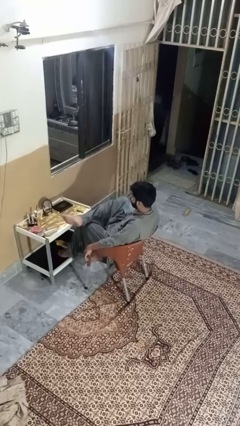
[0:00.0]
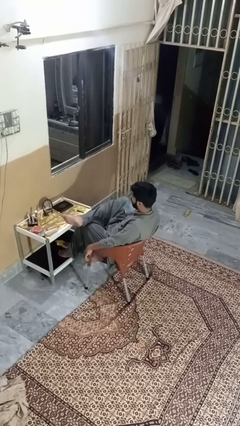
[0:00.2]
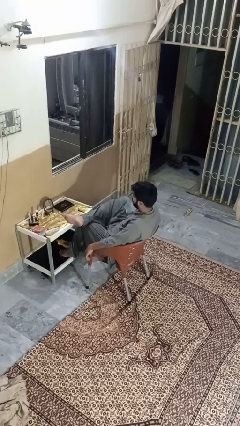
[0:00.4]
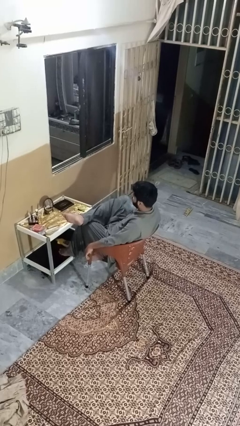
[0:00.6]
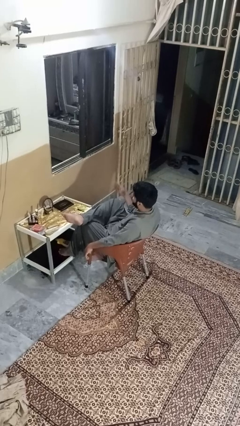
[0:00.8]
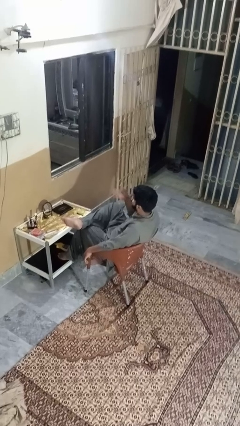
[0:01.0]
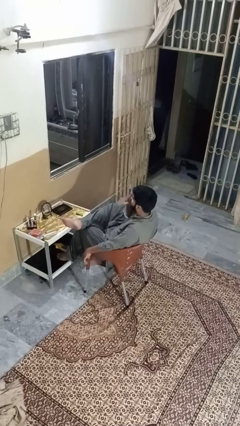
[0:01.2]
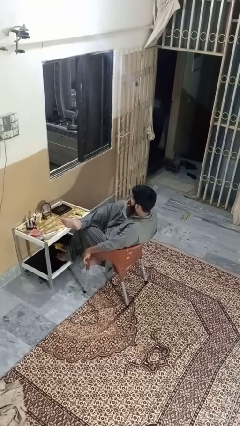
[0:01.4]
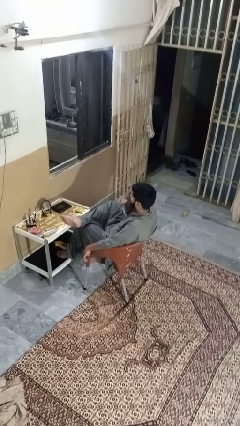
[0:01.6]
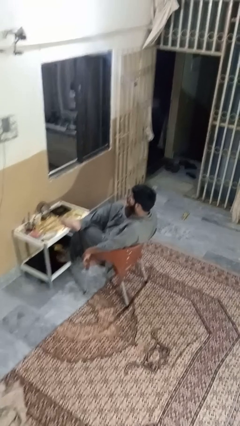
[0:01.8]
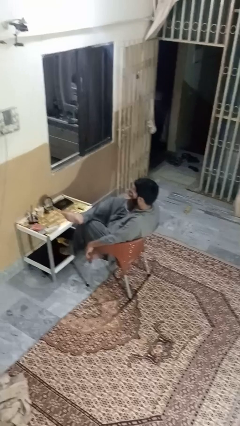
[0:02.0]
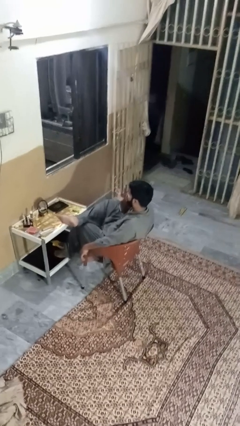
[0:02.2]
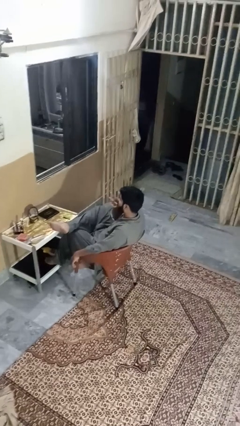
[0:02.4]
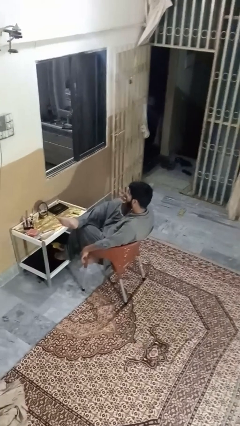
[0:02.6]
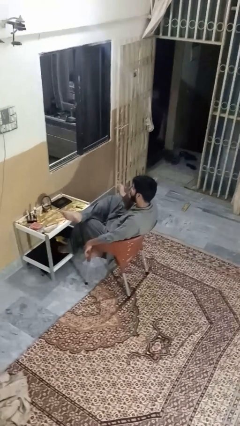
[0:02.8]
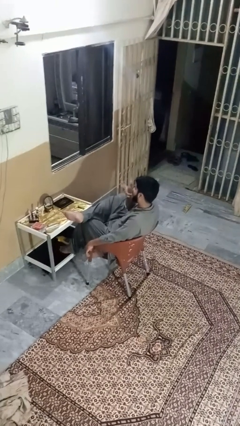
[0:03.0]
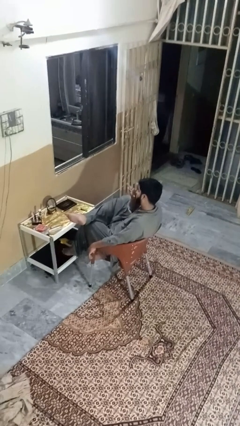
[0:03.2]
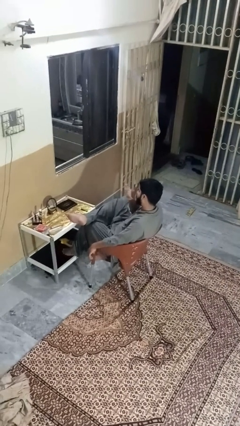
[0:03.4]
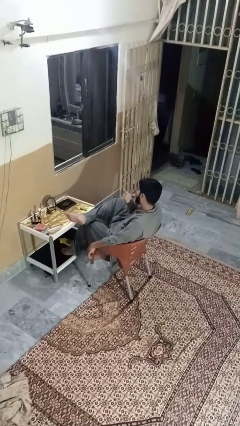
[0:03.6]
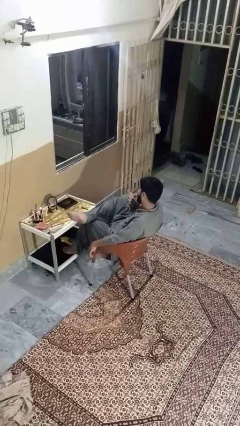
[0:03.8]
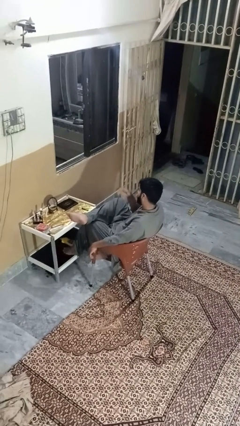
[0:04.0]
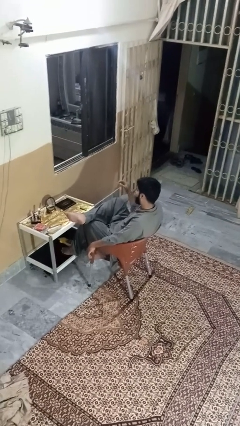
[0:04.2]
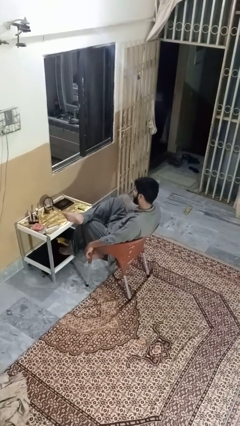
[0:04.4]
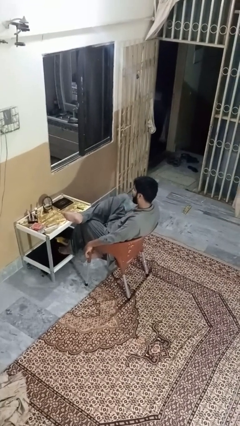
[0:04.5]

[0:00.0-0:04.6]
person licks fingers

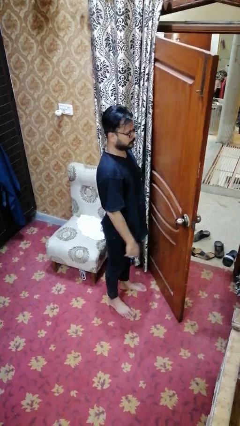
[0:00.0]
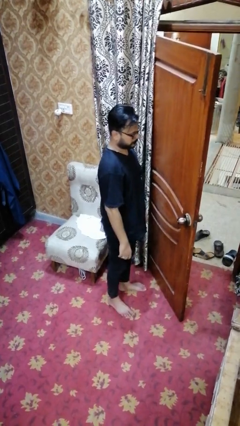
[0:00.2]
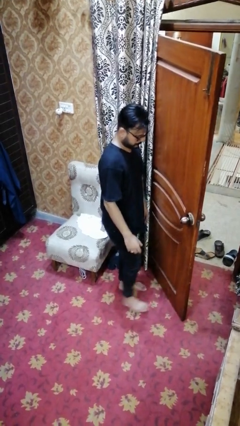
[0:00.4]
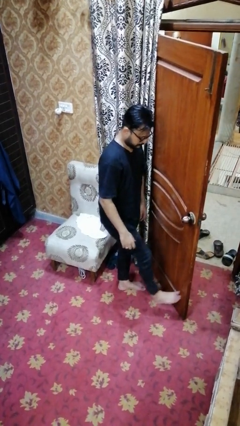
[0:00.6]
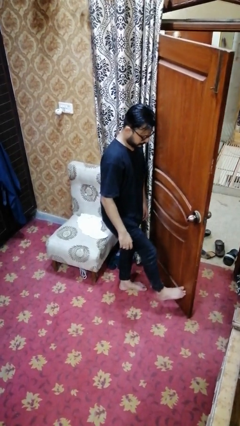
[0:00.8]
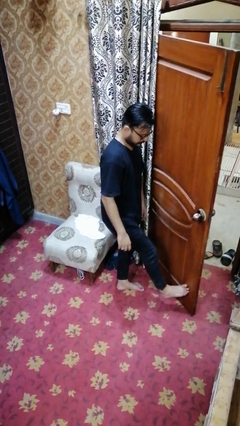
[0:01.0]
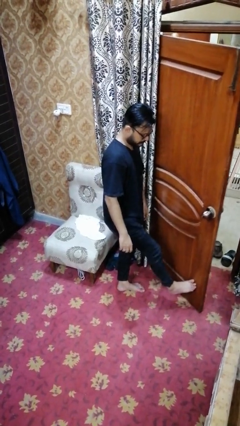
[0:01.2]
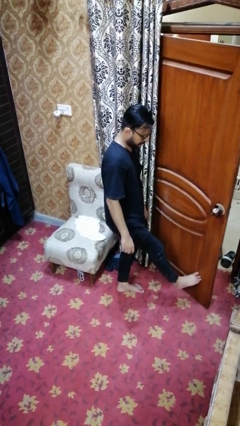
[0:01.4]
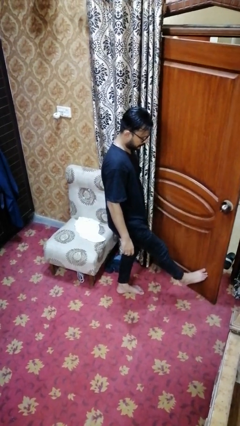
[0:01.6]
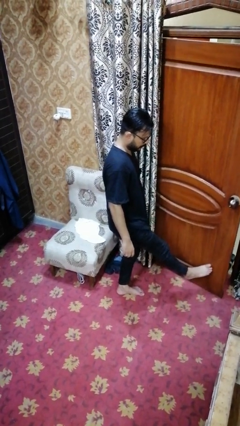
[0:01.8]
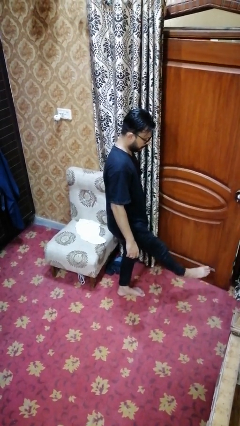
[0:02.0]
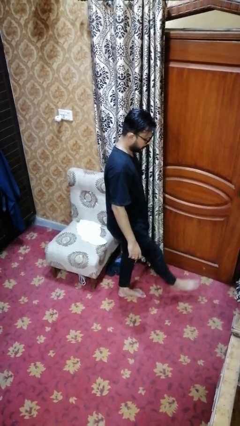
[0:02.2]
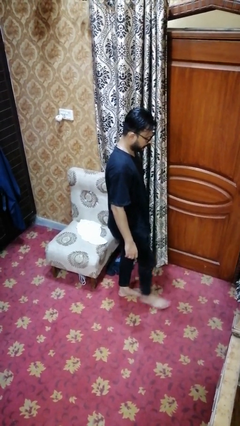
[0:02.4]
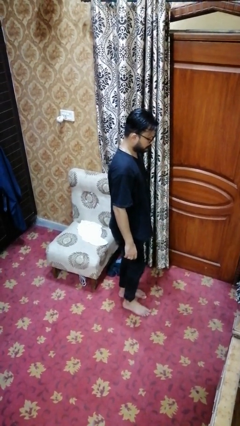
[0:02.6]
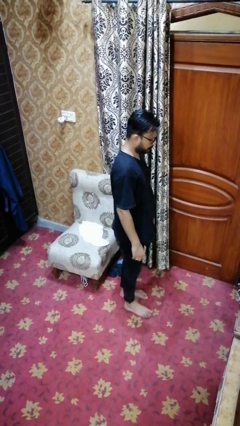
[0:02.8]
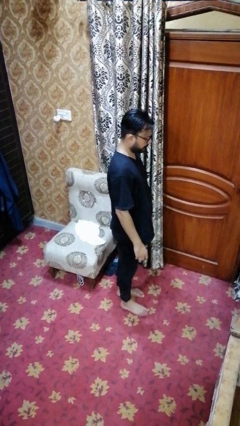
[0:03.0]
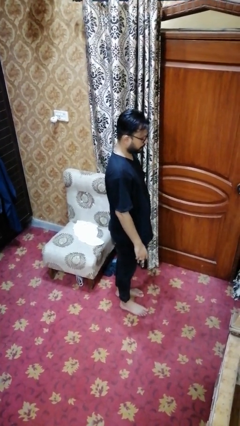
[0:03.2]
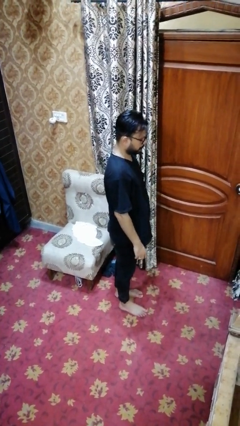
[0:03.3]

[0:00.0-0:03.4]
person closes door with foot

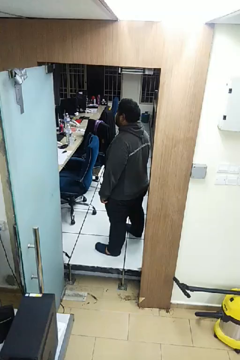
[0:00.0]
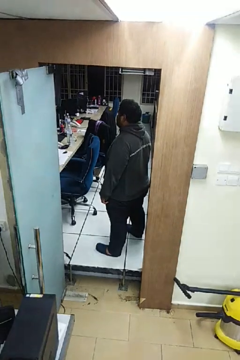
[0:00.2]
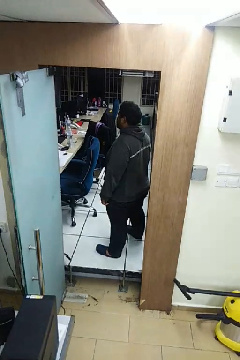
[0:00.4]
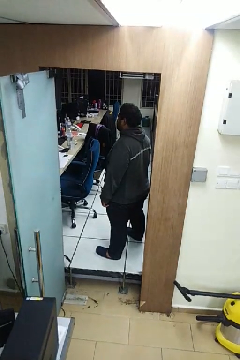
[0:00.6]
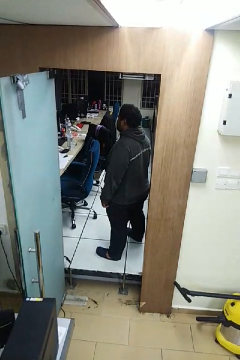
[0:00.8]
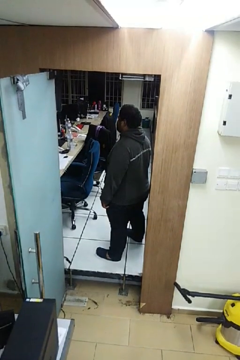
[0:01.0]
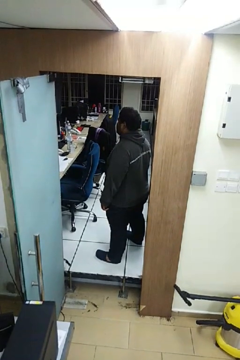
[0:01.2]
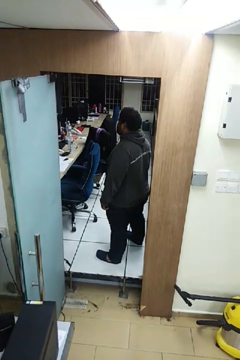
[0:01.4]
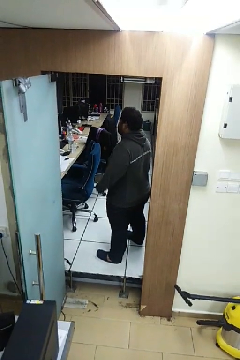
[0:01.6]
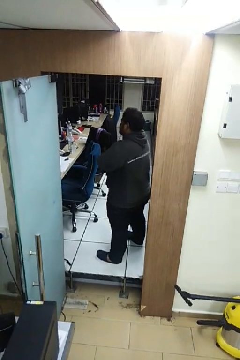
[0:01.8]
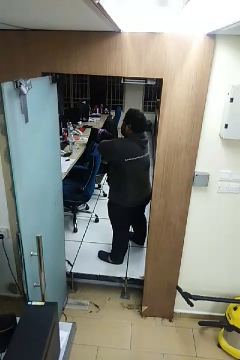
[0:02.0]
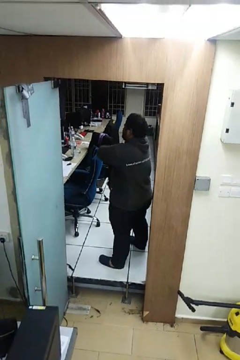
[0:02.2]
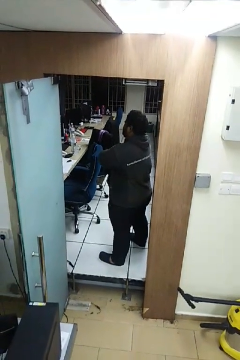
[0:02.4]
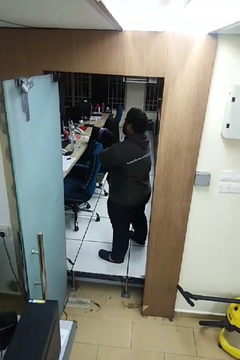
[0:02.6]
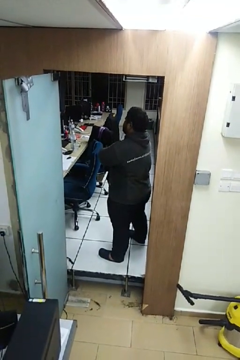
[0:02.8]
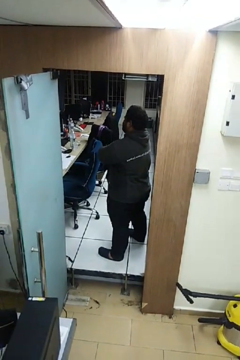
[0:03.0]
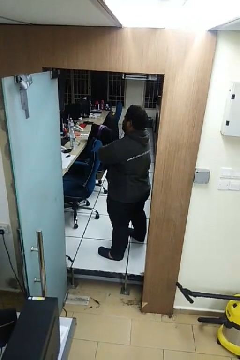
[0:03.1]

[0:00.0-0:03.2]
person crosses arms

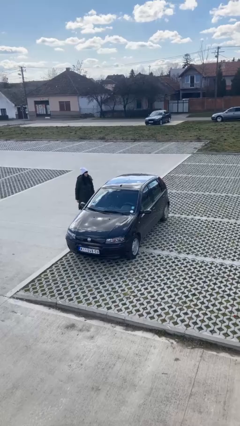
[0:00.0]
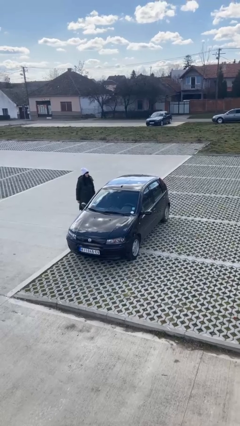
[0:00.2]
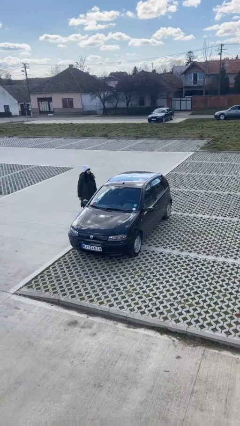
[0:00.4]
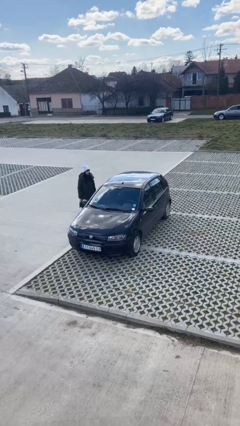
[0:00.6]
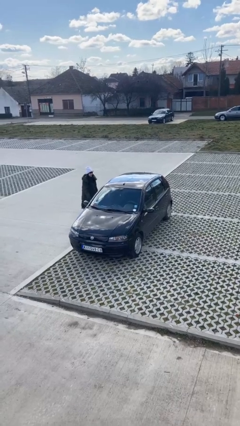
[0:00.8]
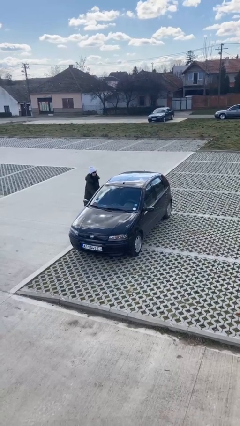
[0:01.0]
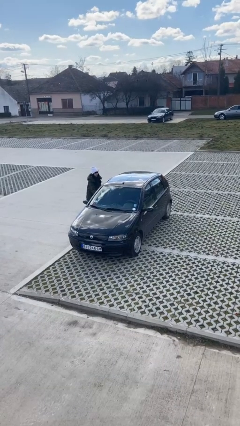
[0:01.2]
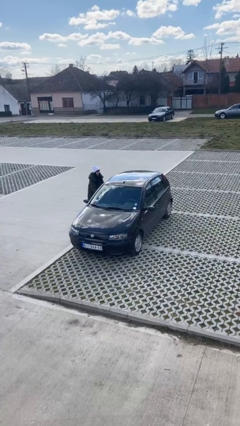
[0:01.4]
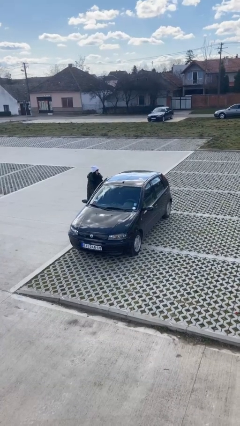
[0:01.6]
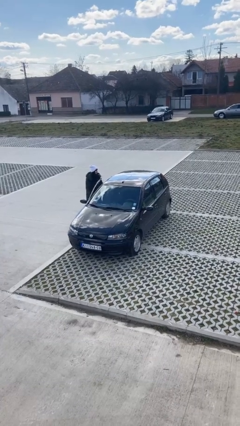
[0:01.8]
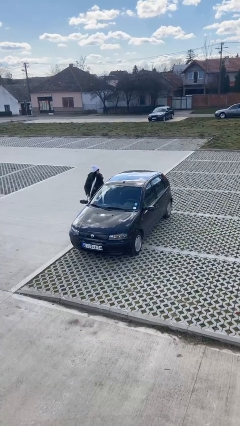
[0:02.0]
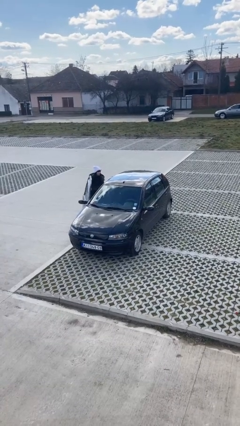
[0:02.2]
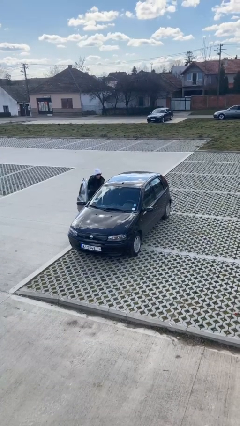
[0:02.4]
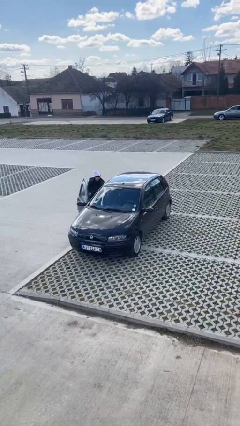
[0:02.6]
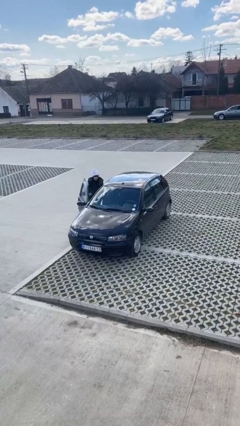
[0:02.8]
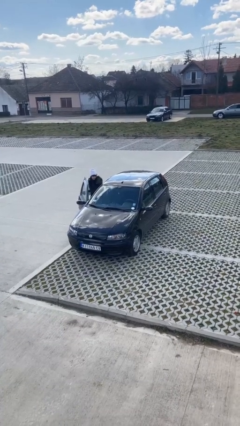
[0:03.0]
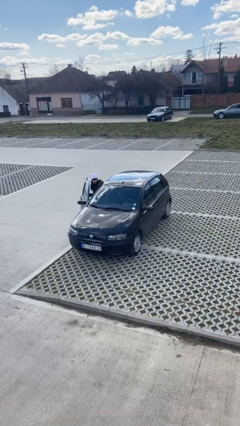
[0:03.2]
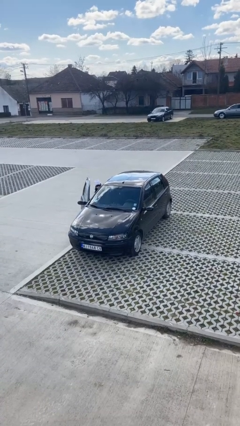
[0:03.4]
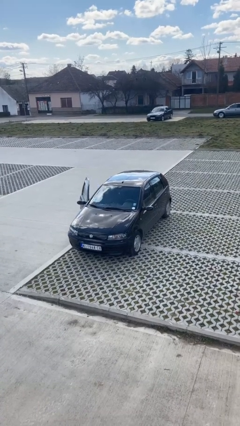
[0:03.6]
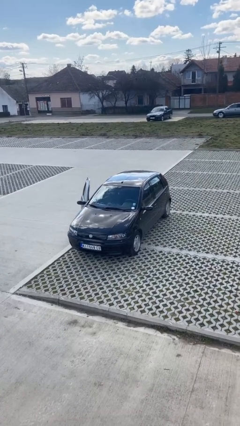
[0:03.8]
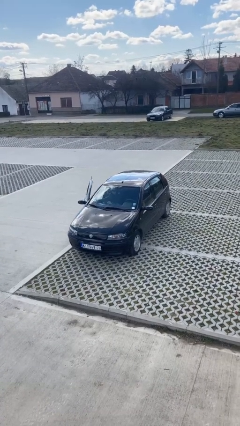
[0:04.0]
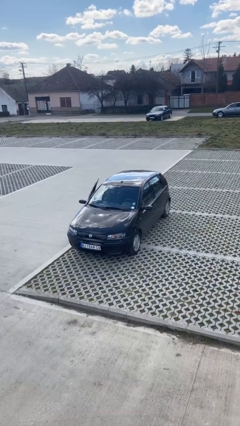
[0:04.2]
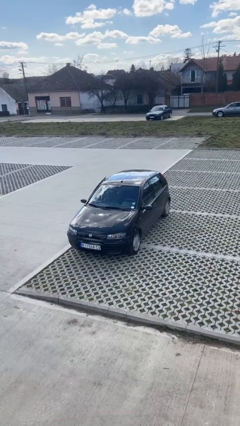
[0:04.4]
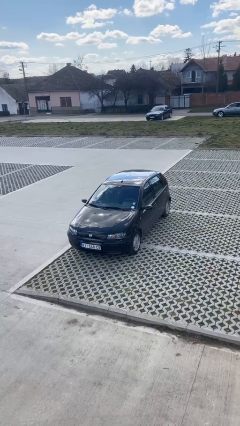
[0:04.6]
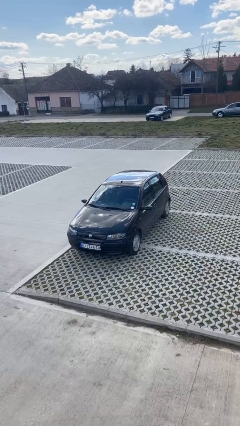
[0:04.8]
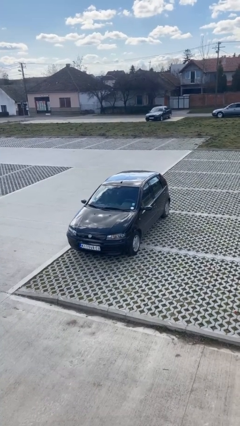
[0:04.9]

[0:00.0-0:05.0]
car picks up person

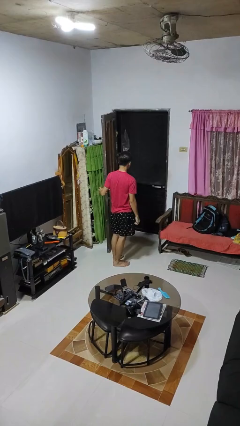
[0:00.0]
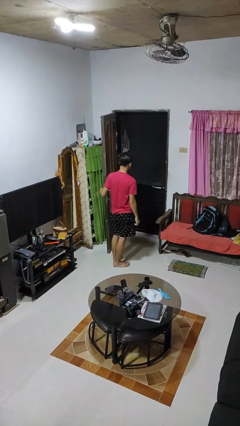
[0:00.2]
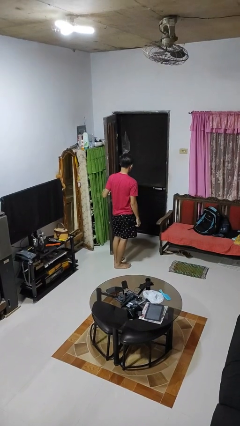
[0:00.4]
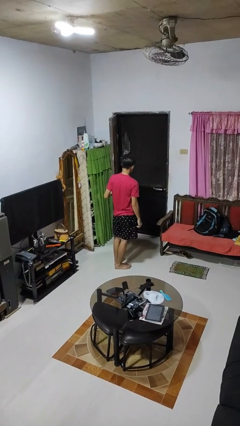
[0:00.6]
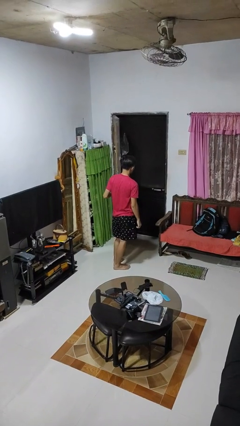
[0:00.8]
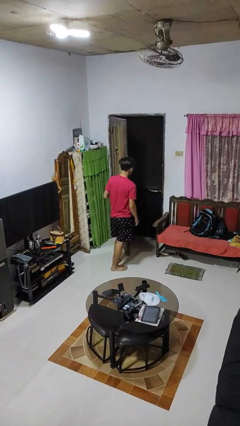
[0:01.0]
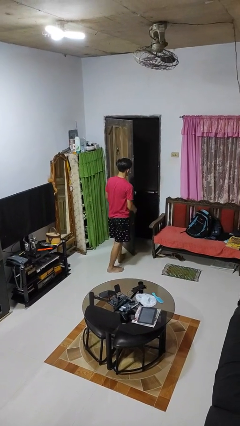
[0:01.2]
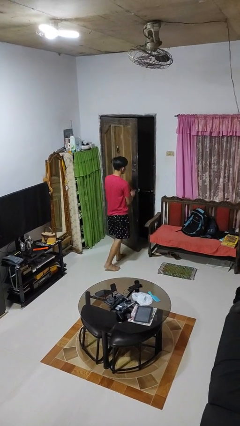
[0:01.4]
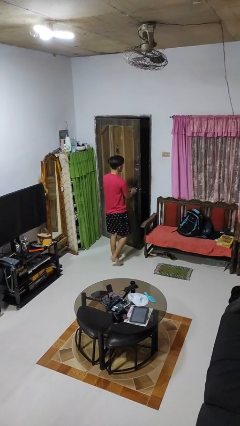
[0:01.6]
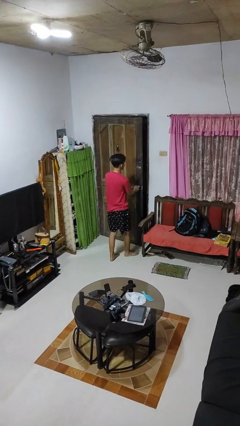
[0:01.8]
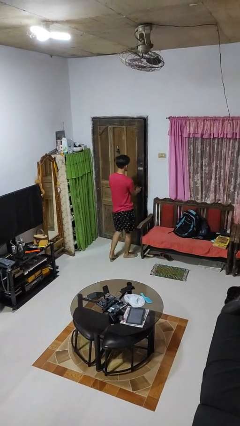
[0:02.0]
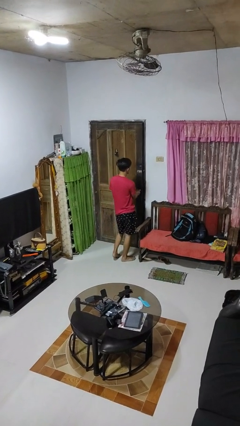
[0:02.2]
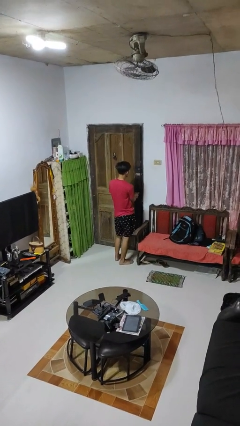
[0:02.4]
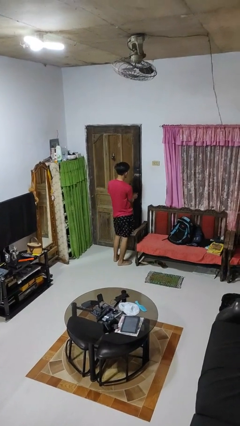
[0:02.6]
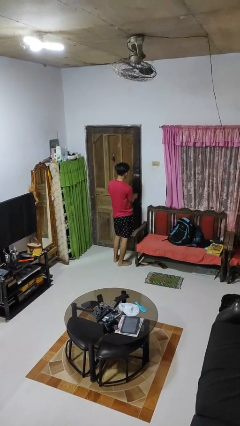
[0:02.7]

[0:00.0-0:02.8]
person closes facility door
